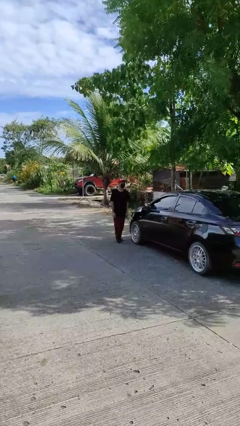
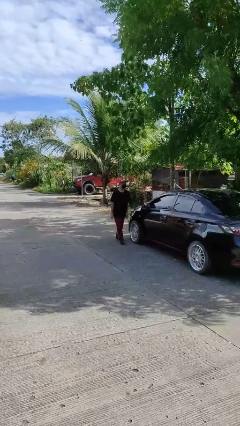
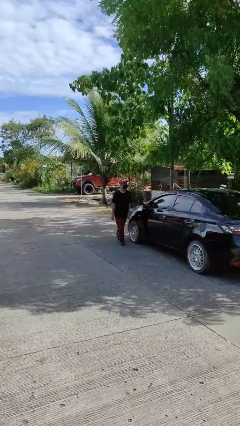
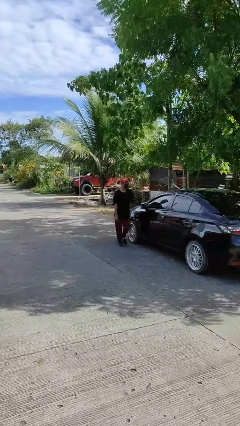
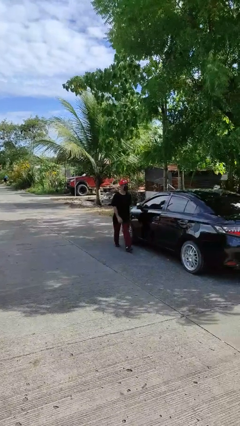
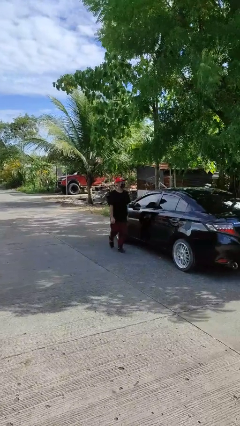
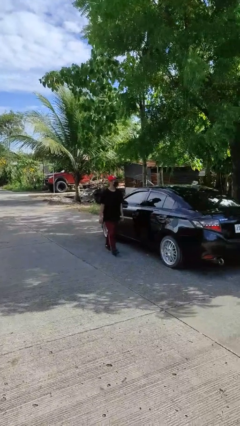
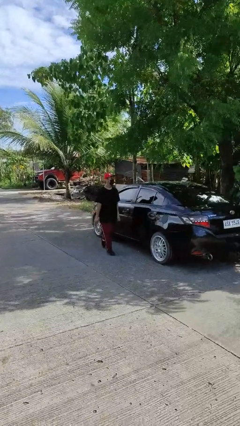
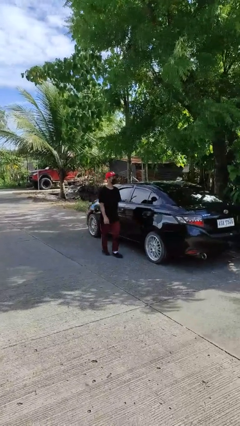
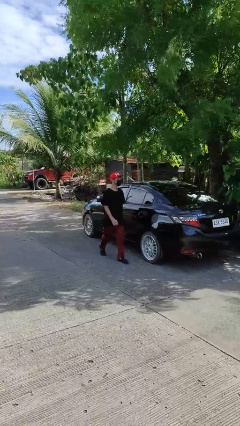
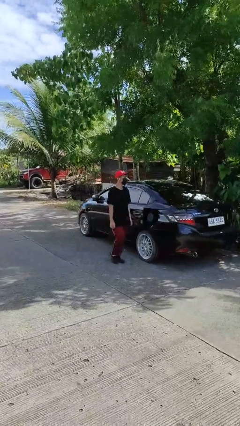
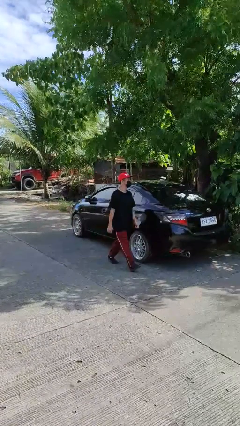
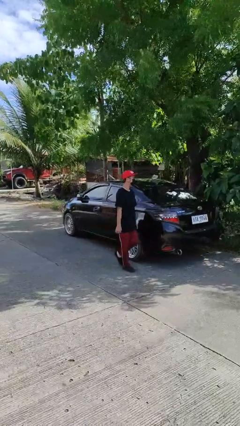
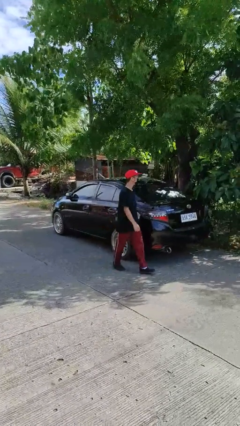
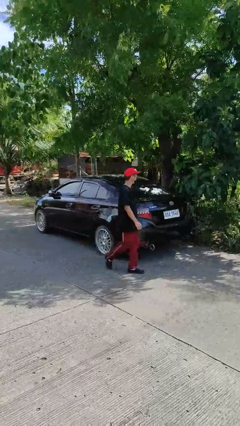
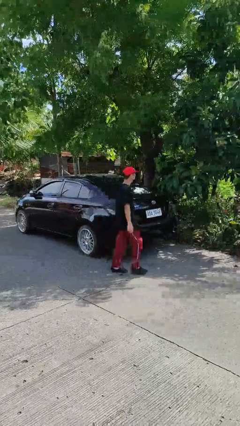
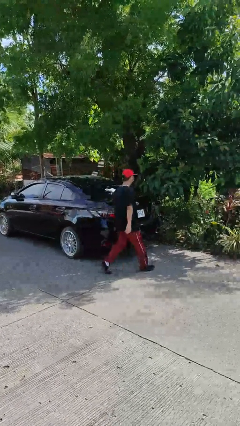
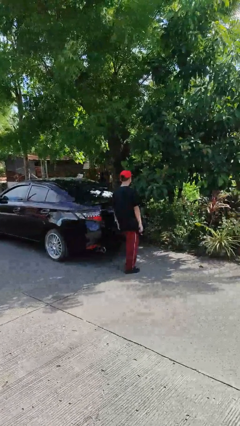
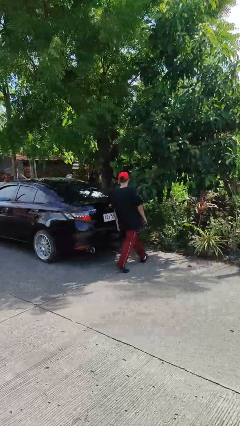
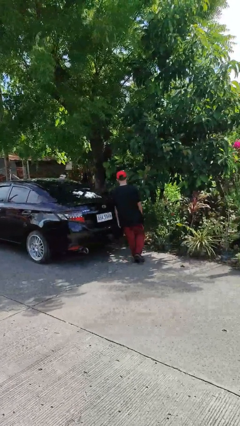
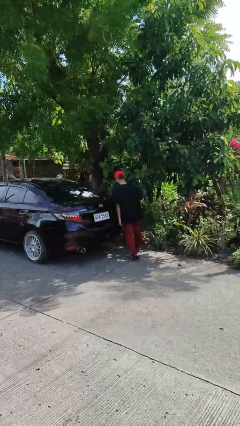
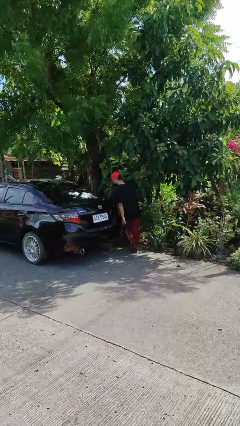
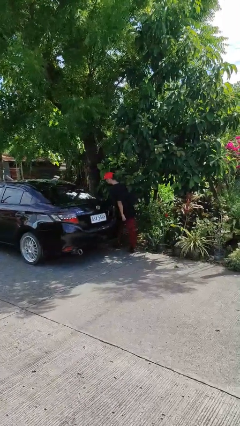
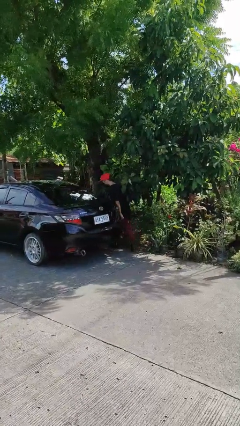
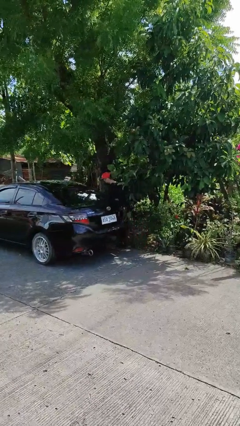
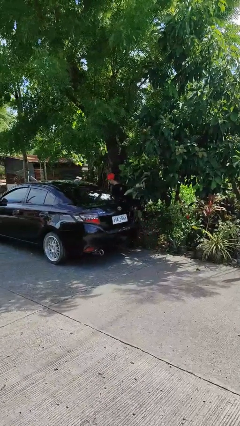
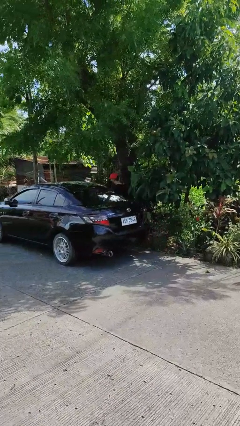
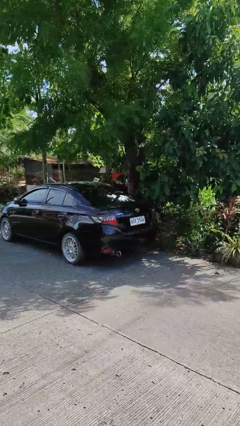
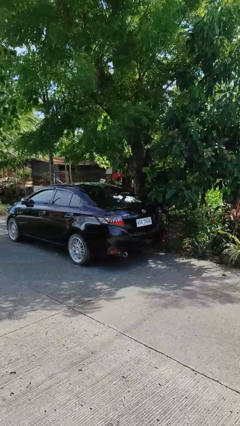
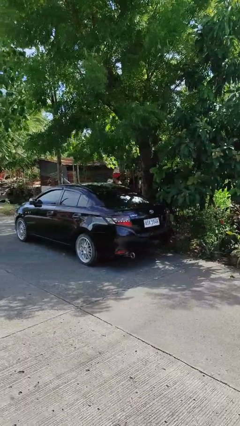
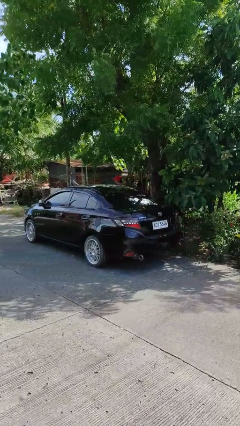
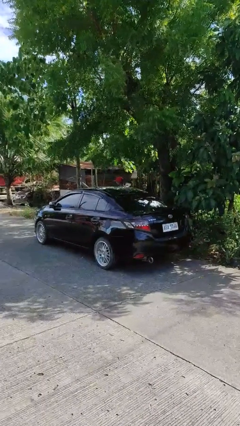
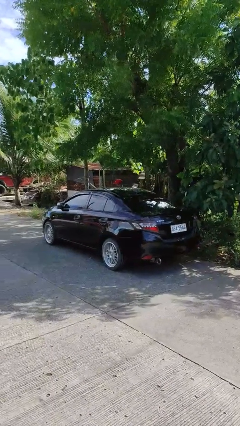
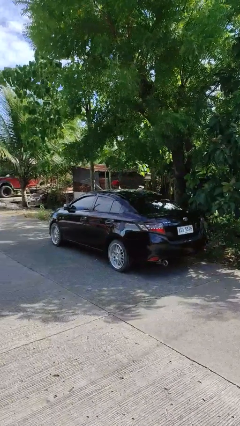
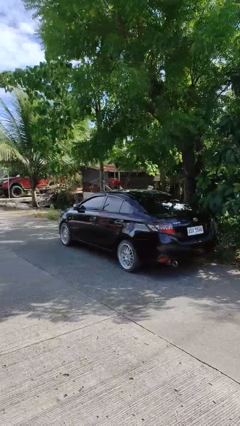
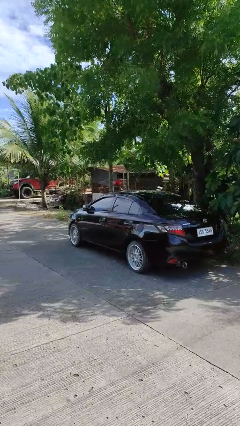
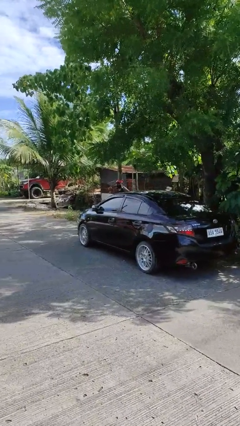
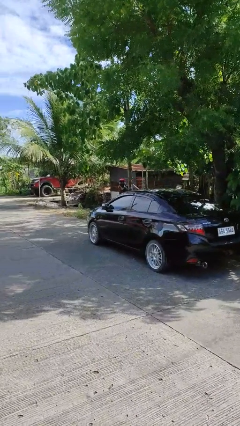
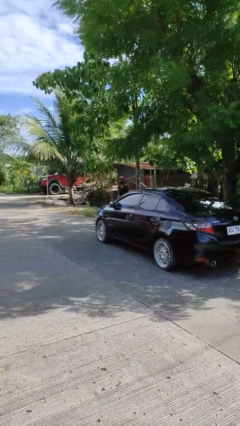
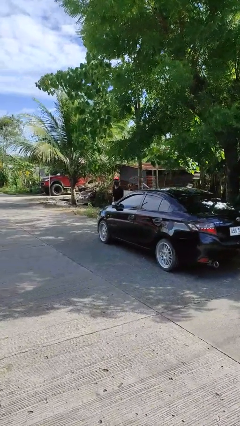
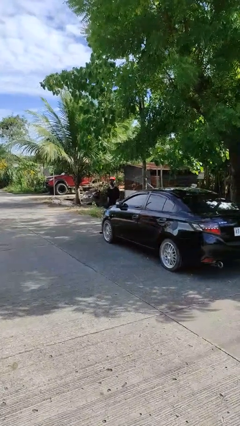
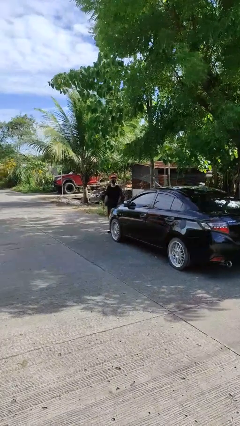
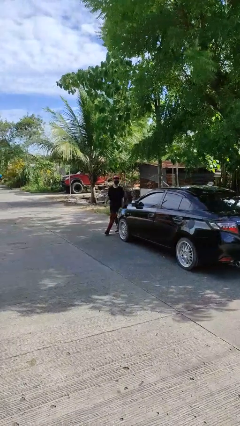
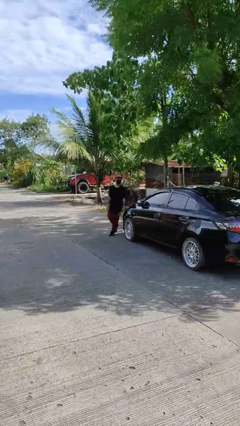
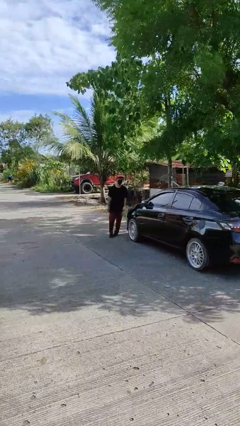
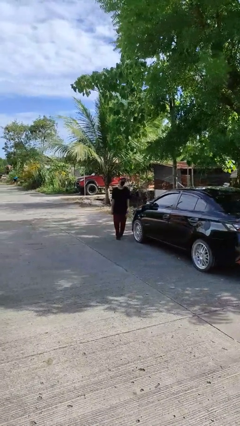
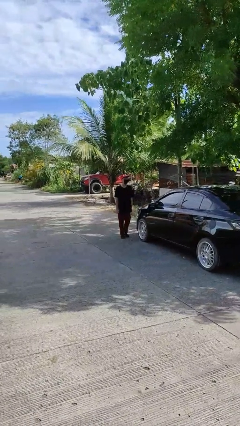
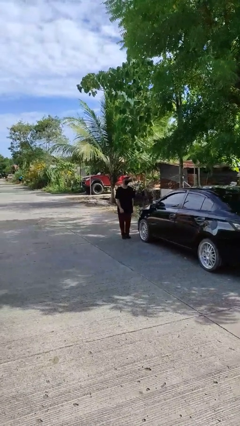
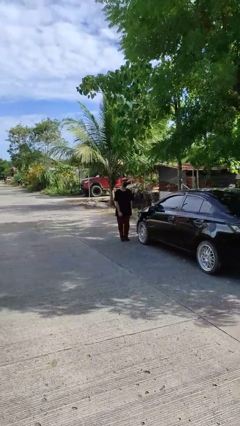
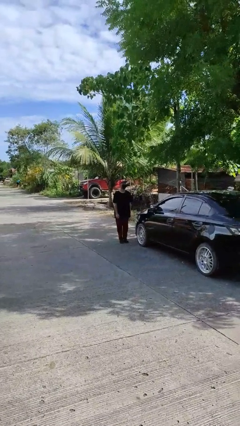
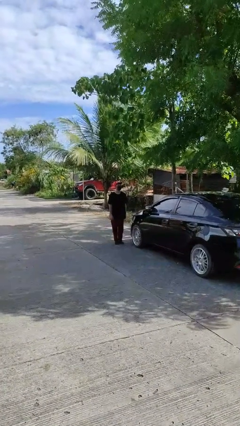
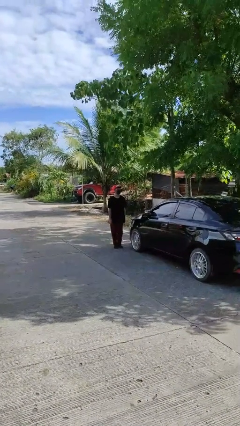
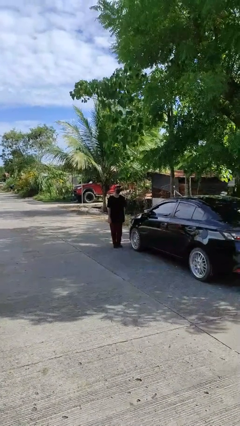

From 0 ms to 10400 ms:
person walks around car

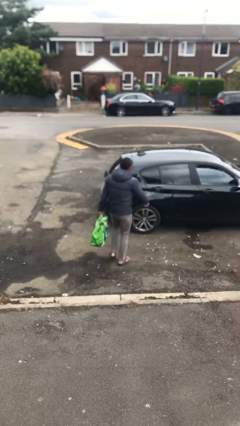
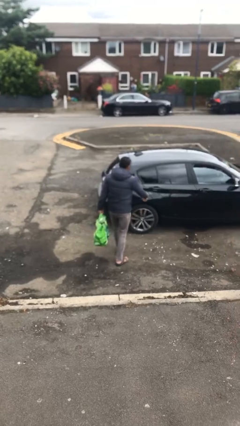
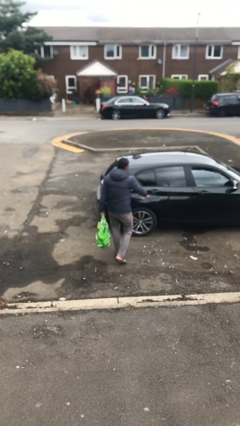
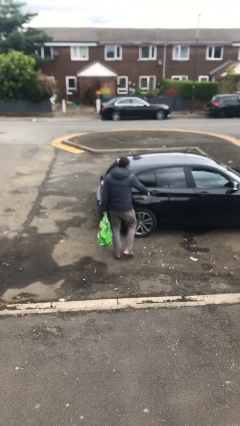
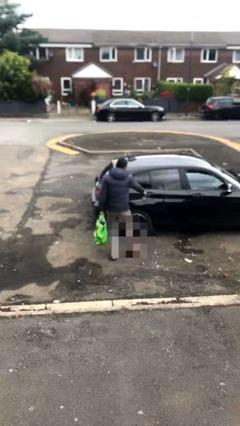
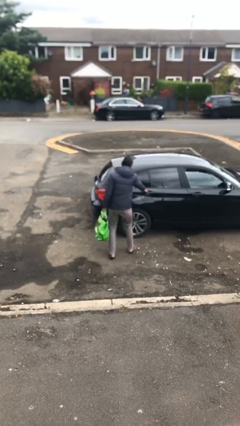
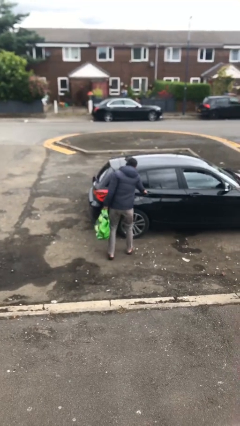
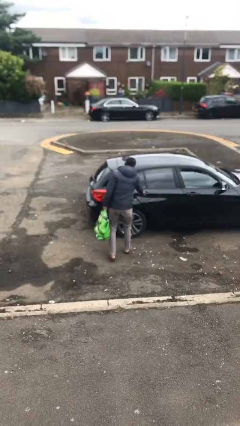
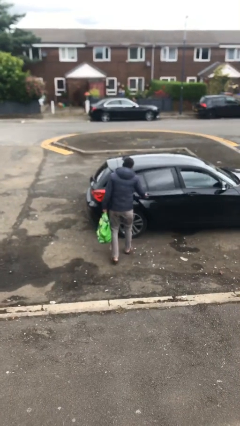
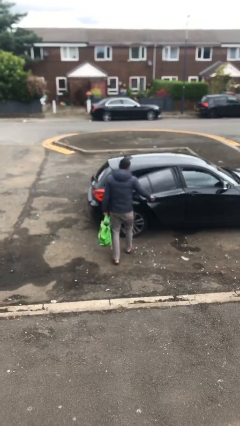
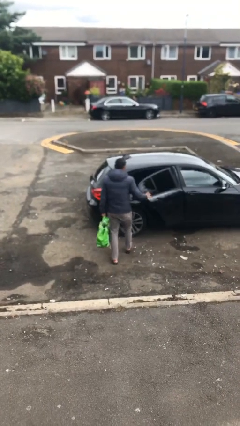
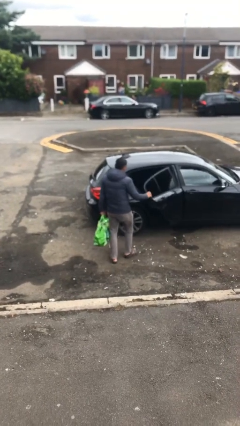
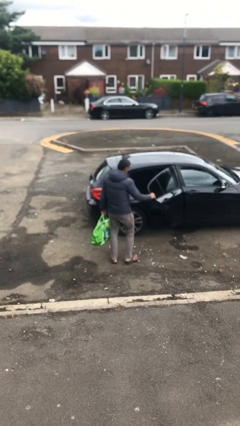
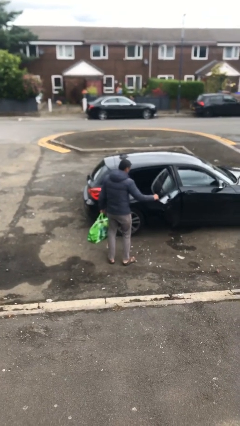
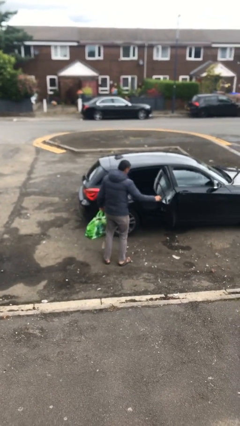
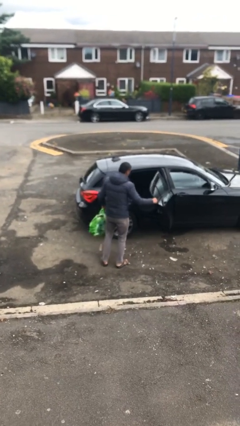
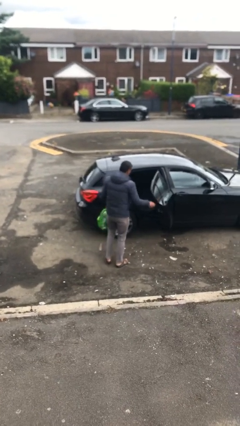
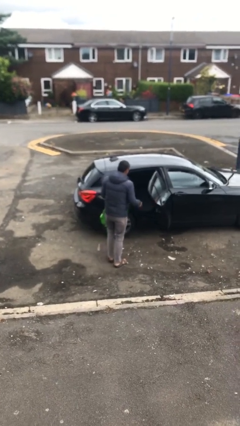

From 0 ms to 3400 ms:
person opens car door

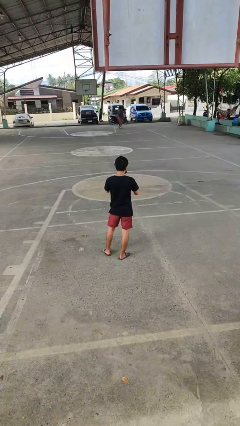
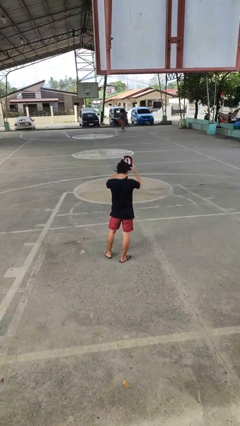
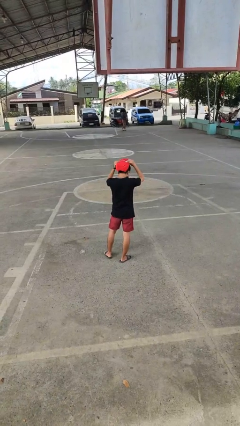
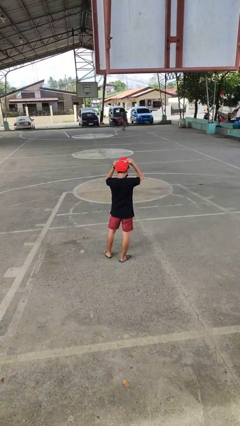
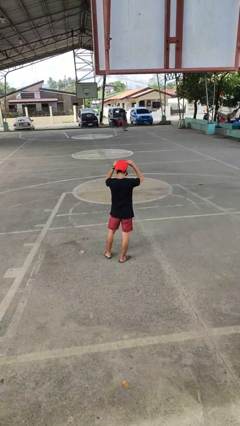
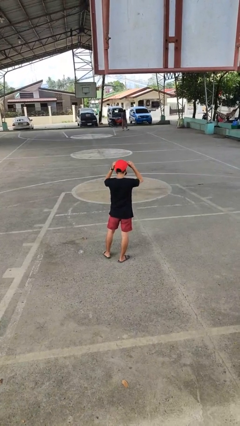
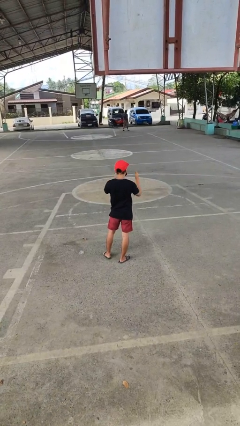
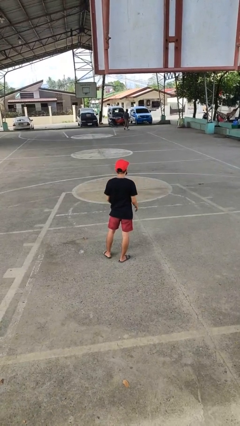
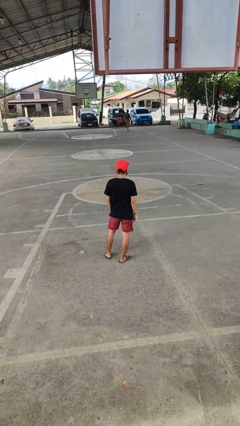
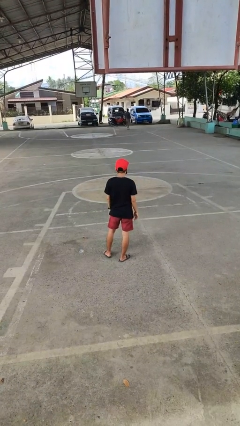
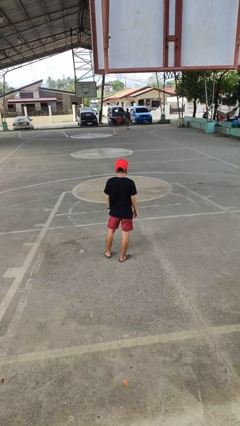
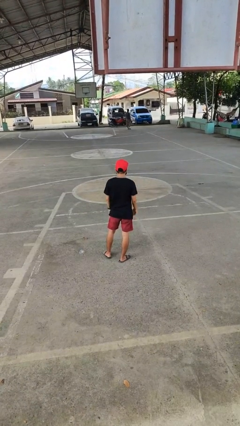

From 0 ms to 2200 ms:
person puts on hat

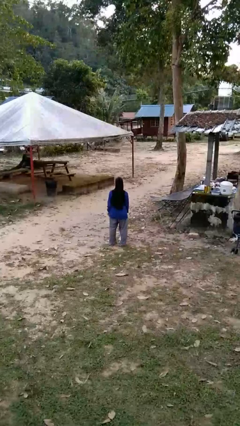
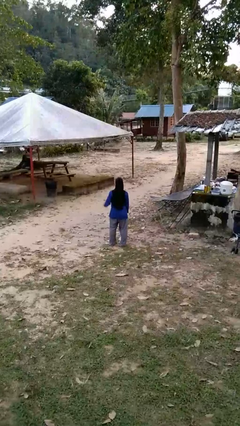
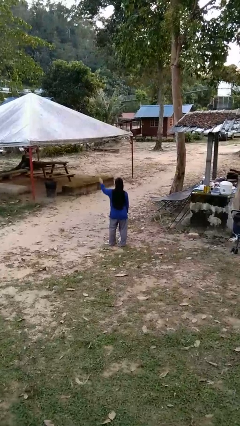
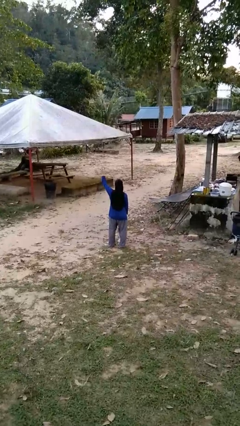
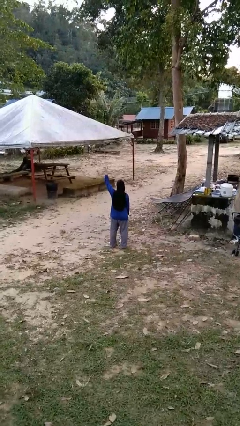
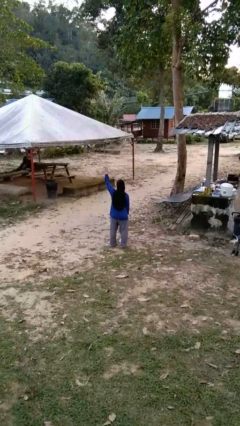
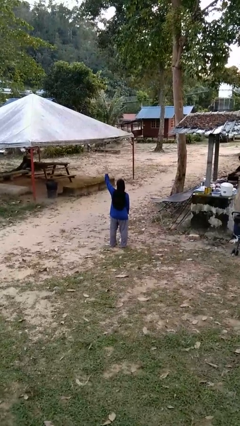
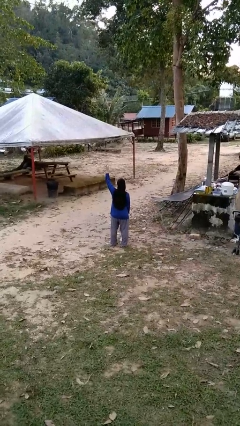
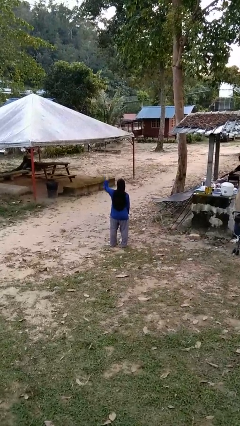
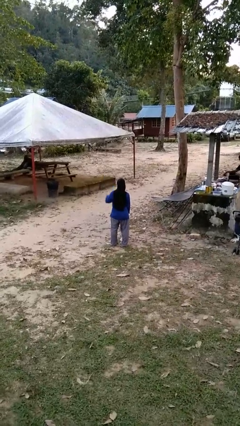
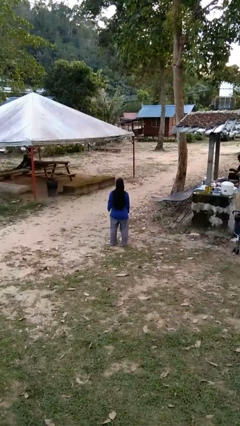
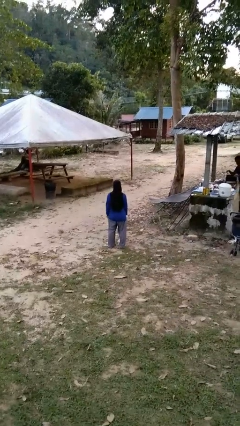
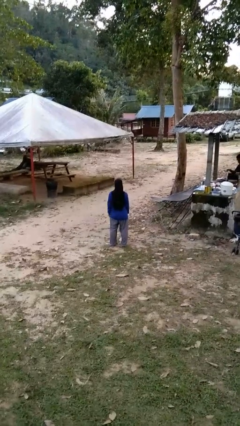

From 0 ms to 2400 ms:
person gestures number four
